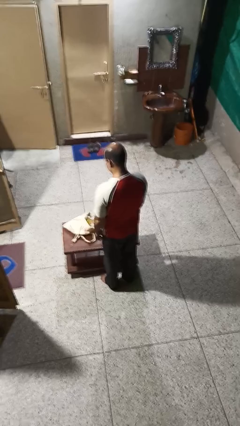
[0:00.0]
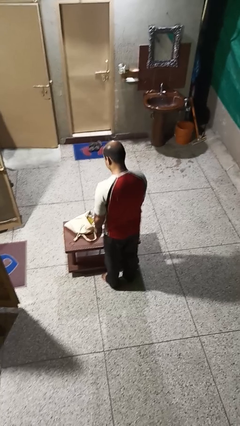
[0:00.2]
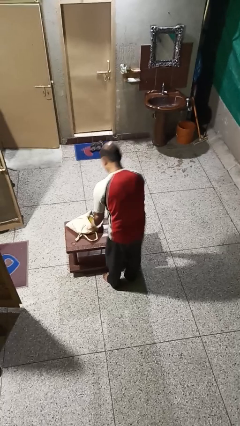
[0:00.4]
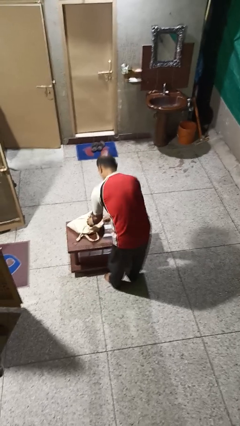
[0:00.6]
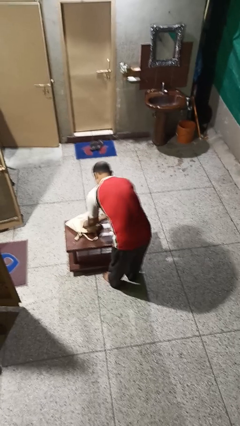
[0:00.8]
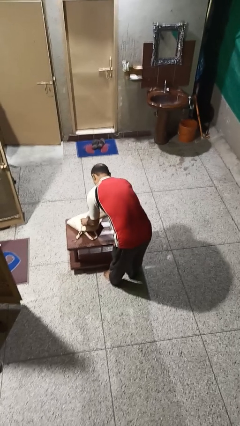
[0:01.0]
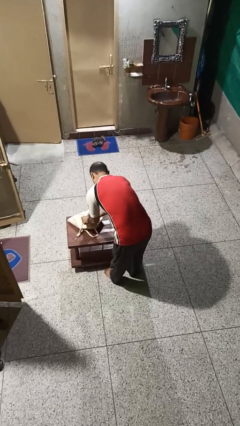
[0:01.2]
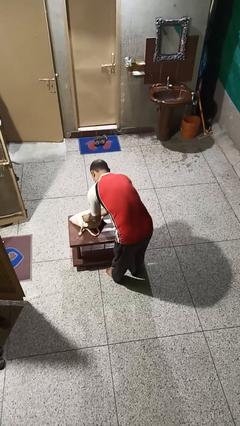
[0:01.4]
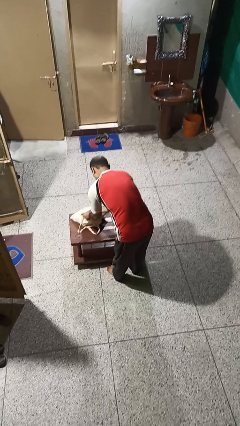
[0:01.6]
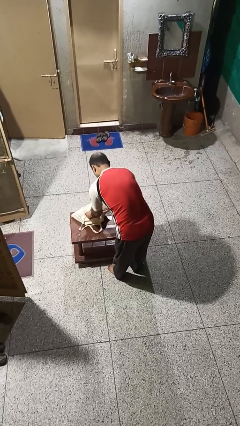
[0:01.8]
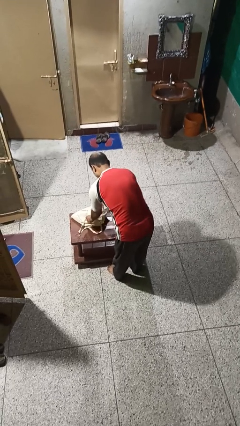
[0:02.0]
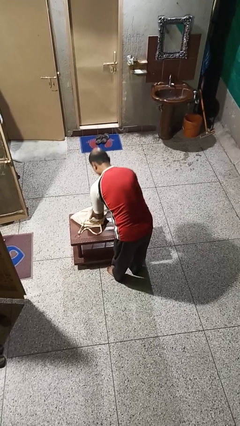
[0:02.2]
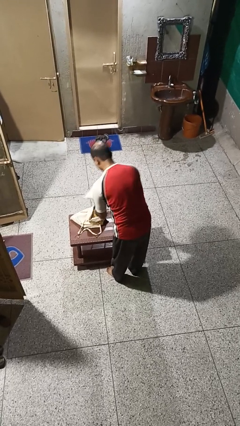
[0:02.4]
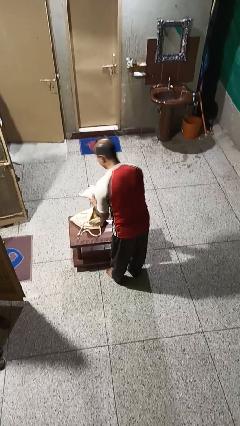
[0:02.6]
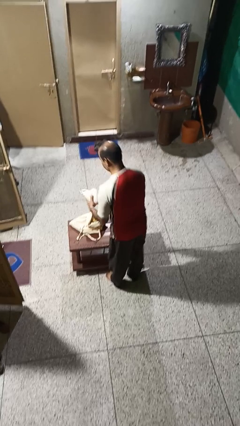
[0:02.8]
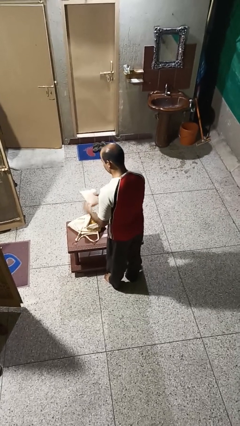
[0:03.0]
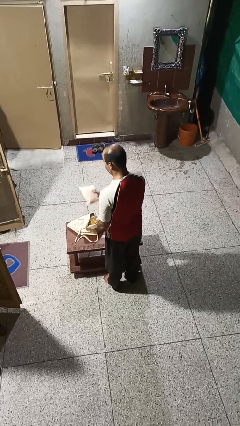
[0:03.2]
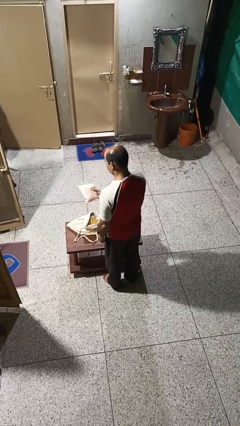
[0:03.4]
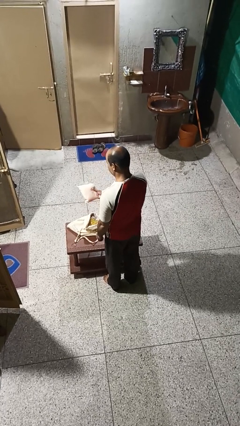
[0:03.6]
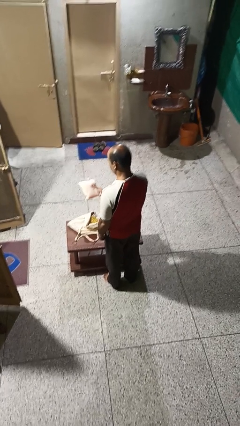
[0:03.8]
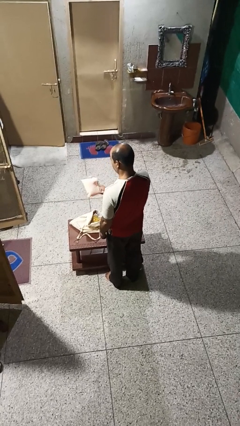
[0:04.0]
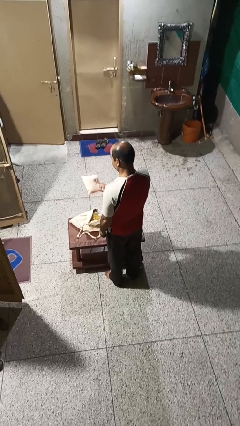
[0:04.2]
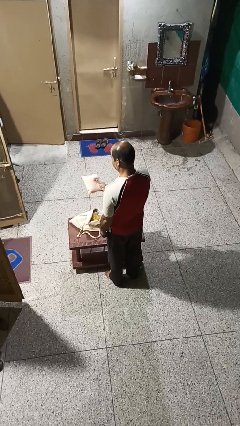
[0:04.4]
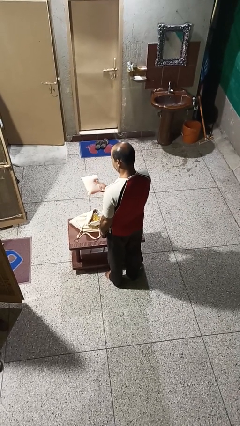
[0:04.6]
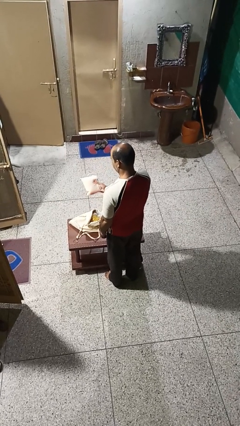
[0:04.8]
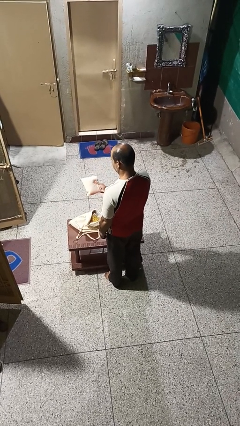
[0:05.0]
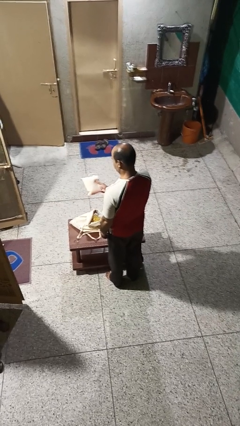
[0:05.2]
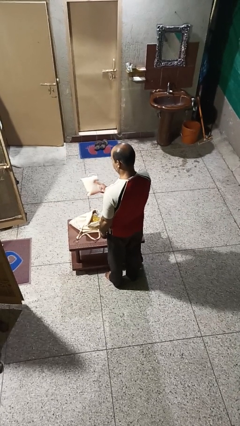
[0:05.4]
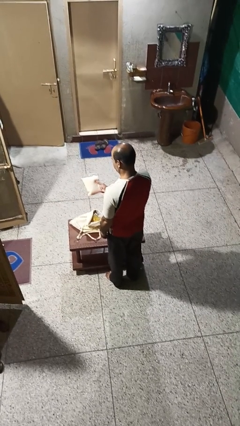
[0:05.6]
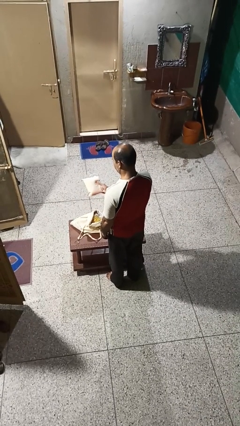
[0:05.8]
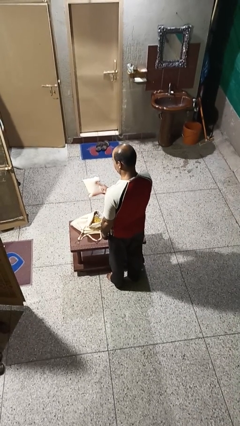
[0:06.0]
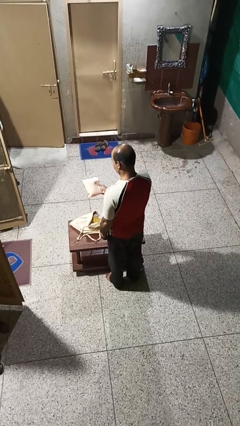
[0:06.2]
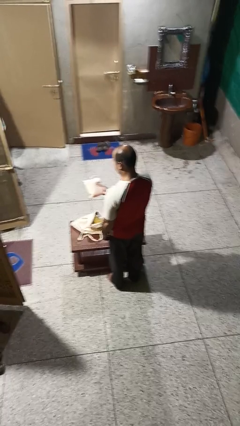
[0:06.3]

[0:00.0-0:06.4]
person takes object from bag
